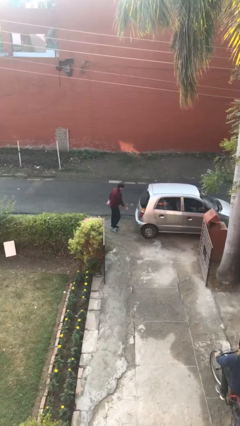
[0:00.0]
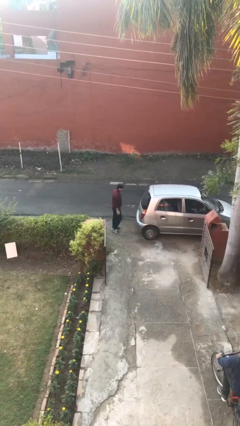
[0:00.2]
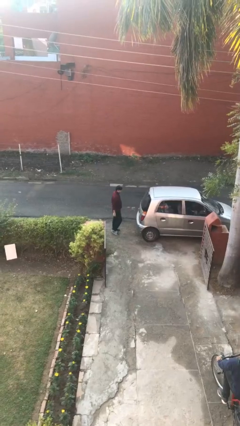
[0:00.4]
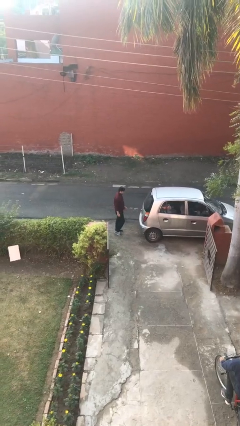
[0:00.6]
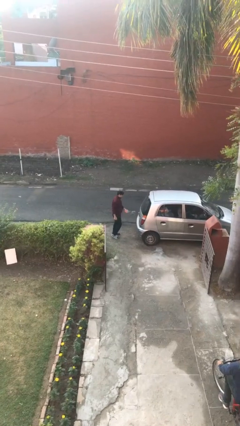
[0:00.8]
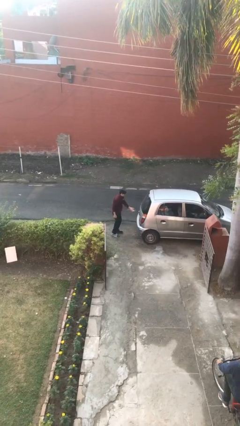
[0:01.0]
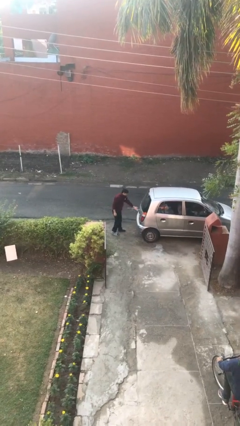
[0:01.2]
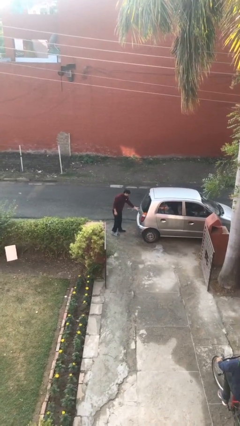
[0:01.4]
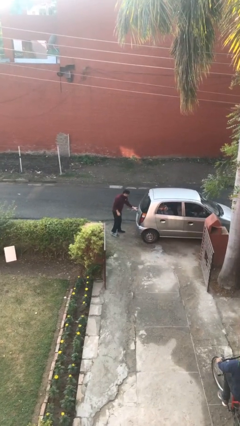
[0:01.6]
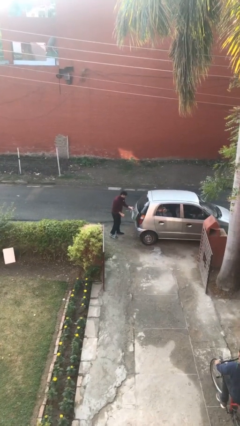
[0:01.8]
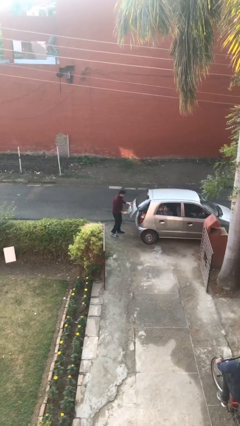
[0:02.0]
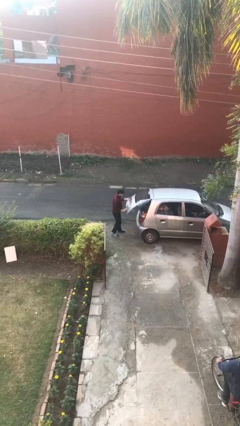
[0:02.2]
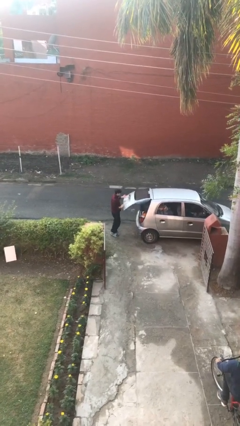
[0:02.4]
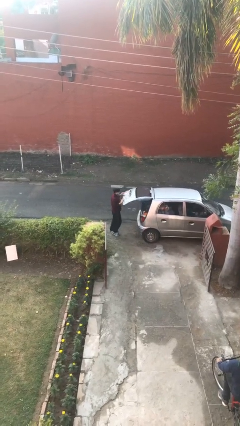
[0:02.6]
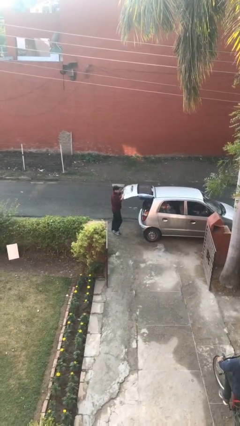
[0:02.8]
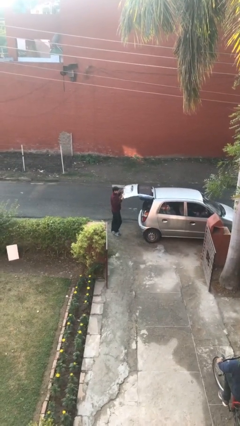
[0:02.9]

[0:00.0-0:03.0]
person opens car trunk

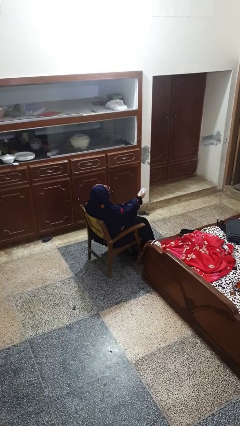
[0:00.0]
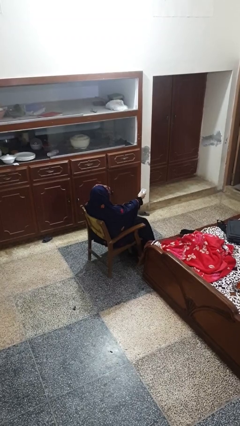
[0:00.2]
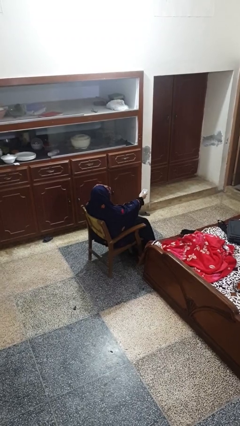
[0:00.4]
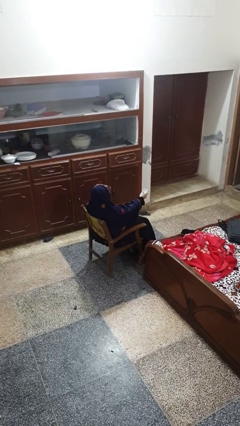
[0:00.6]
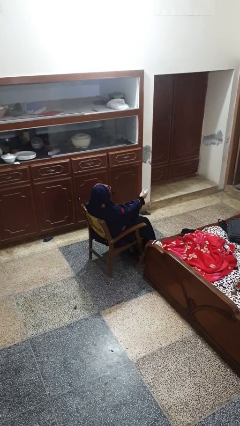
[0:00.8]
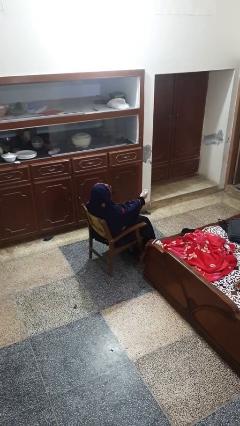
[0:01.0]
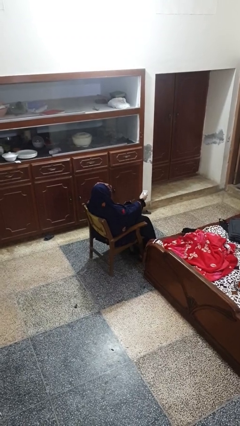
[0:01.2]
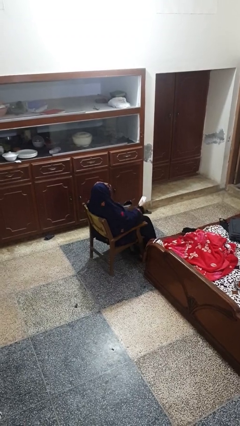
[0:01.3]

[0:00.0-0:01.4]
person uses television remote

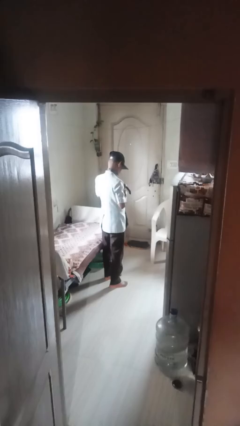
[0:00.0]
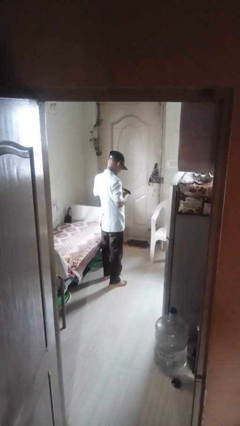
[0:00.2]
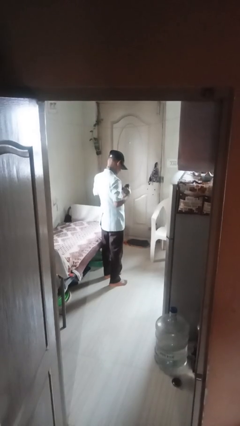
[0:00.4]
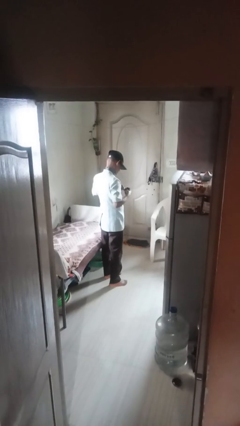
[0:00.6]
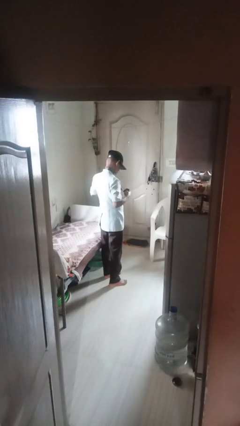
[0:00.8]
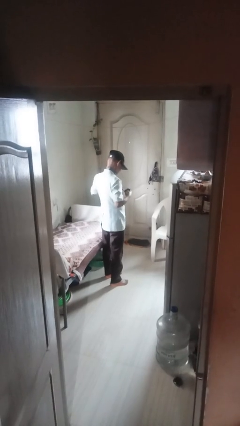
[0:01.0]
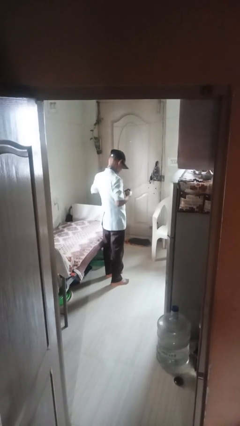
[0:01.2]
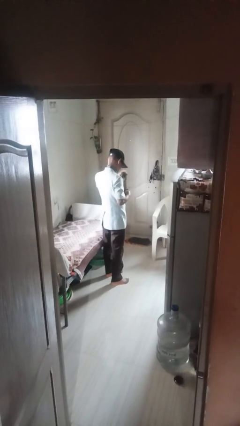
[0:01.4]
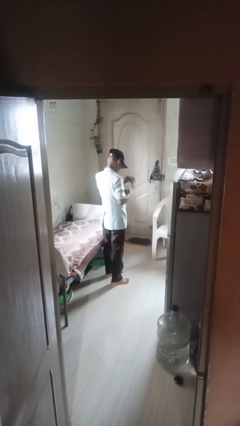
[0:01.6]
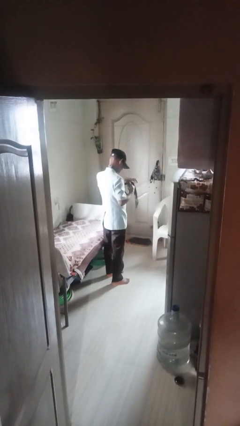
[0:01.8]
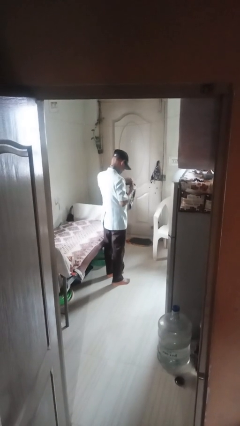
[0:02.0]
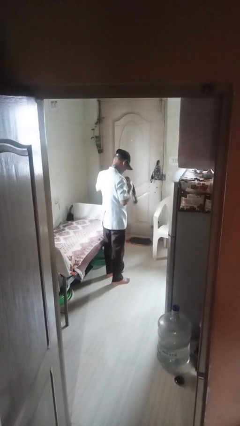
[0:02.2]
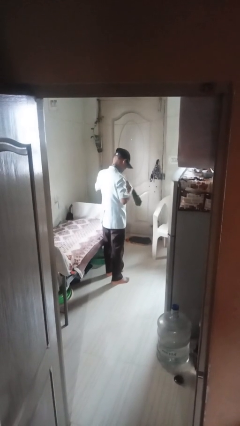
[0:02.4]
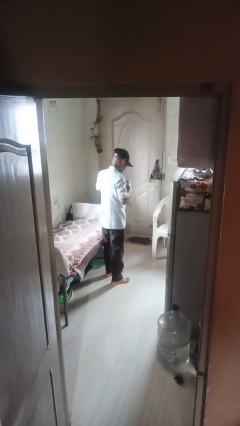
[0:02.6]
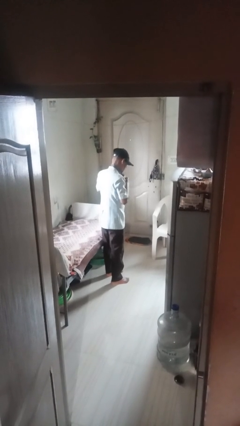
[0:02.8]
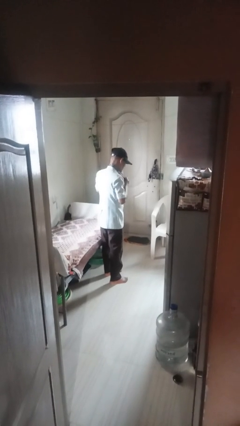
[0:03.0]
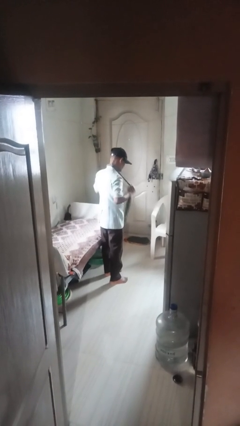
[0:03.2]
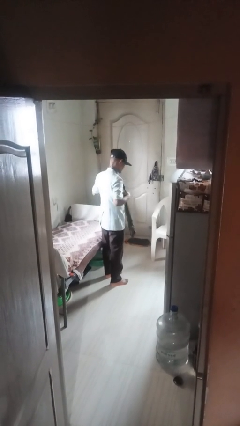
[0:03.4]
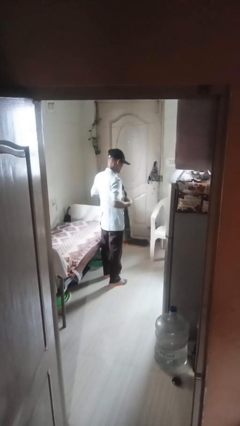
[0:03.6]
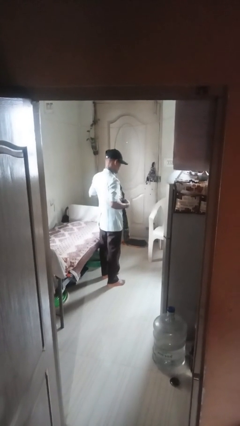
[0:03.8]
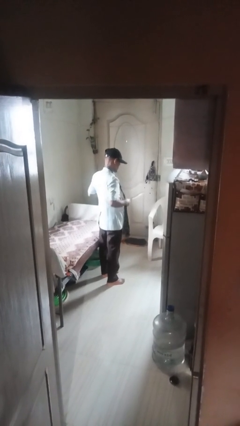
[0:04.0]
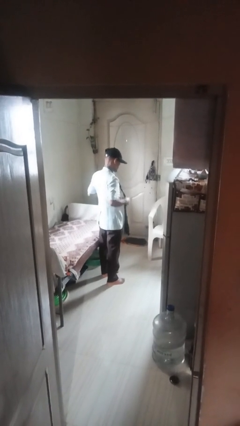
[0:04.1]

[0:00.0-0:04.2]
person takes off necktie

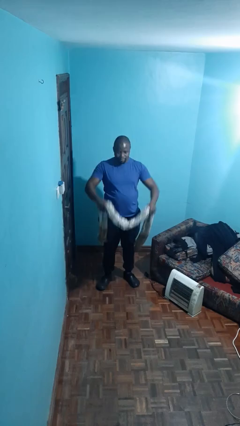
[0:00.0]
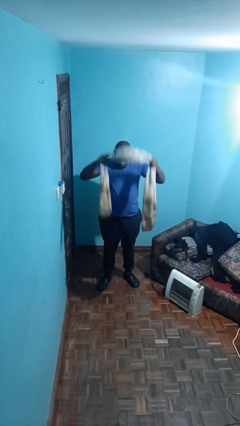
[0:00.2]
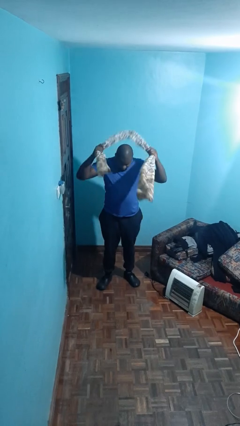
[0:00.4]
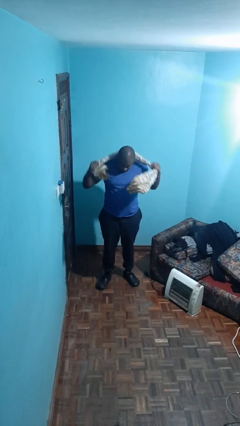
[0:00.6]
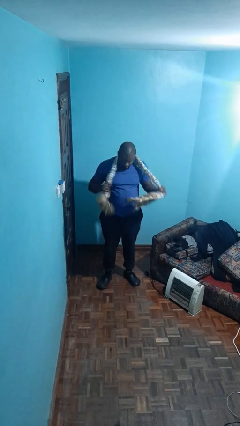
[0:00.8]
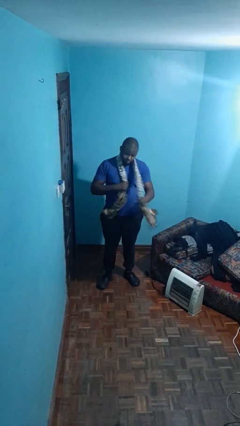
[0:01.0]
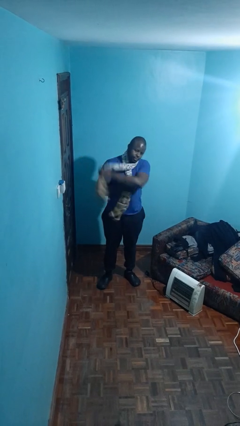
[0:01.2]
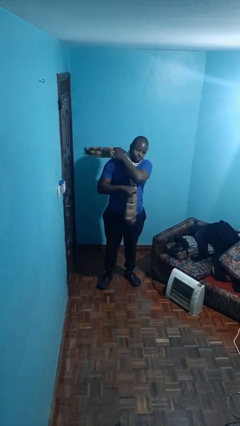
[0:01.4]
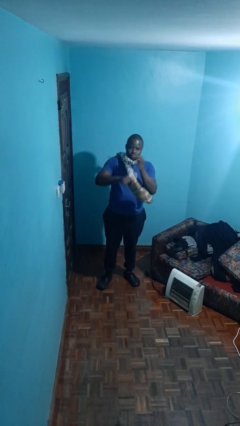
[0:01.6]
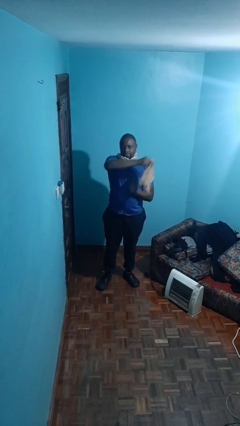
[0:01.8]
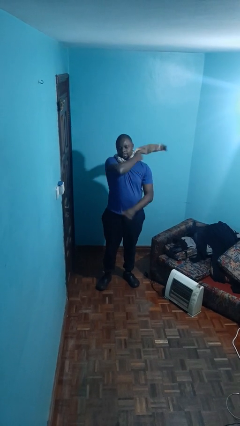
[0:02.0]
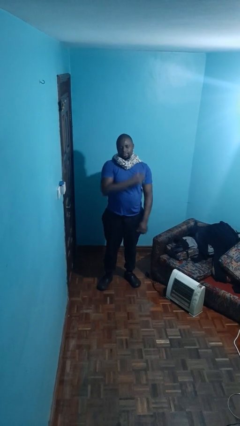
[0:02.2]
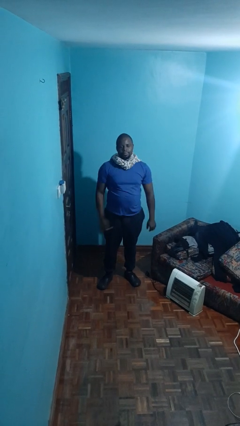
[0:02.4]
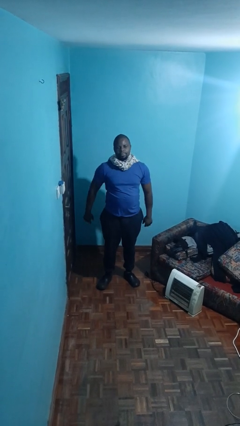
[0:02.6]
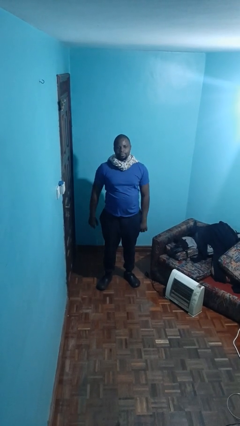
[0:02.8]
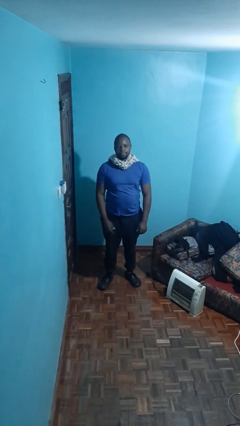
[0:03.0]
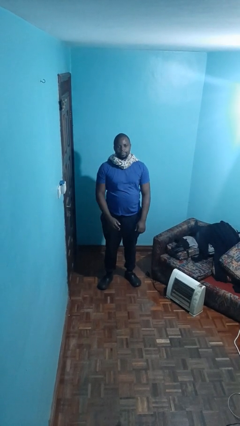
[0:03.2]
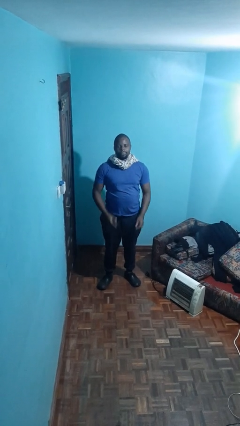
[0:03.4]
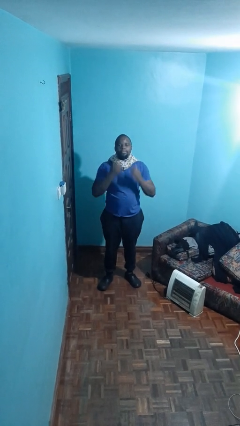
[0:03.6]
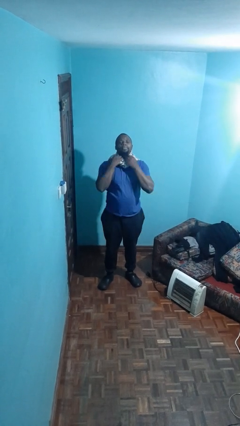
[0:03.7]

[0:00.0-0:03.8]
person puts on scarf

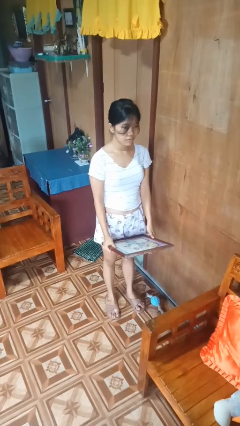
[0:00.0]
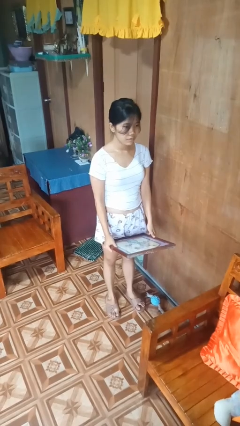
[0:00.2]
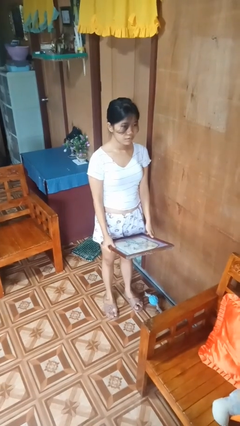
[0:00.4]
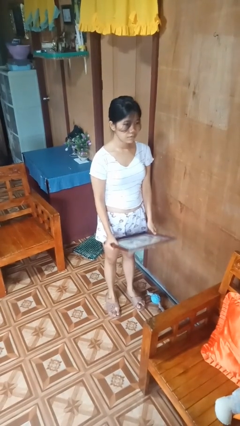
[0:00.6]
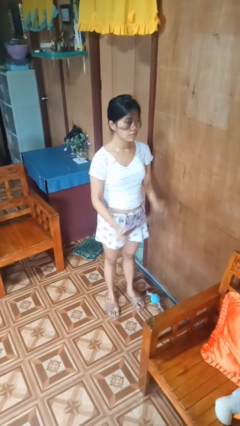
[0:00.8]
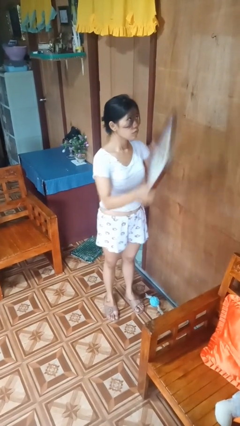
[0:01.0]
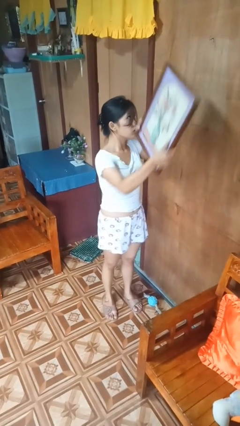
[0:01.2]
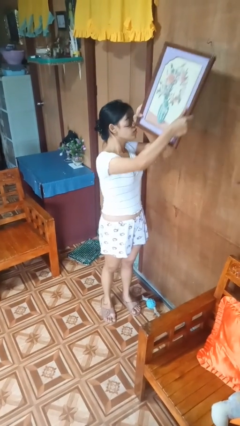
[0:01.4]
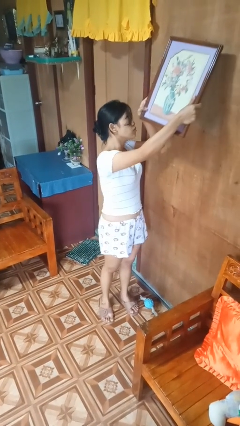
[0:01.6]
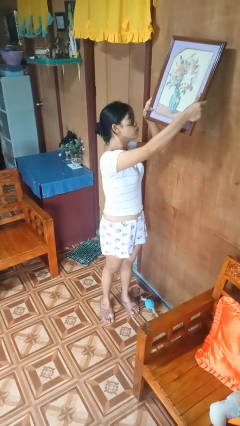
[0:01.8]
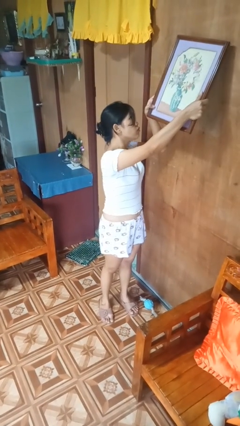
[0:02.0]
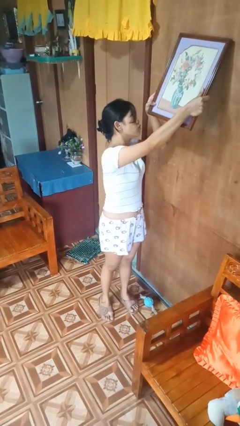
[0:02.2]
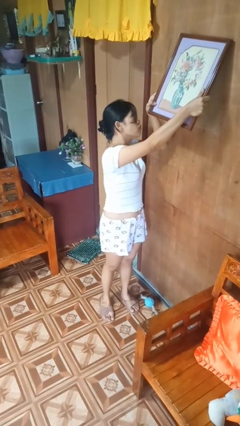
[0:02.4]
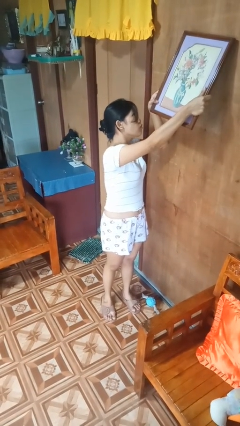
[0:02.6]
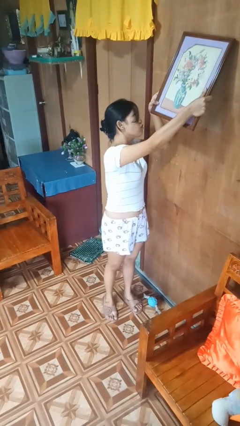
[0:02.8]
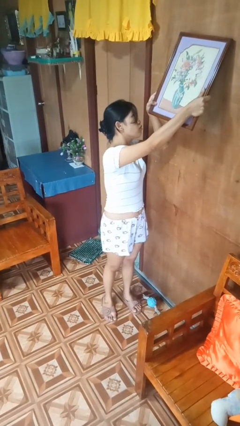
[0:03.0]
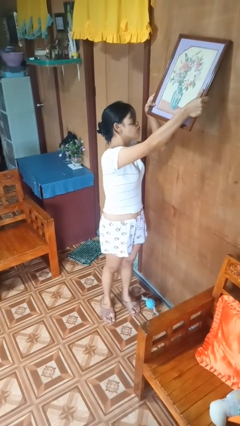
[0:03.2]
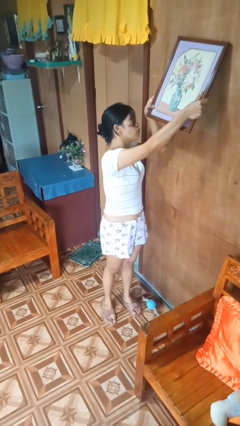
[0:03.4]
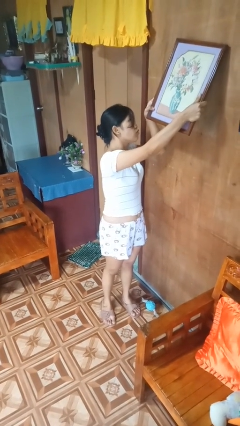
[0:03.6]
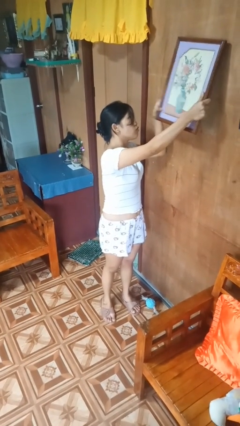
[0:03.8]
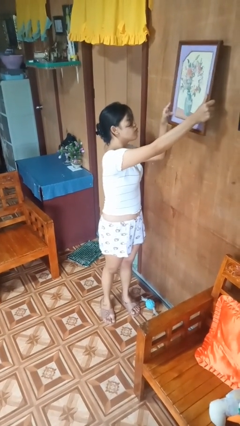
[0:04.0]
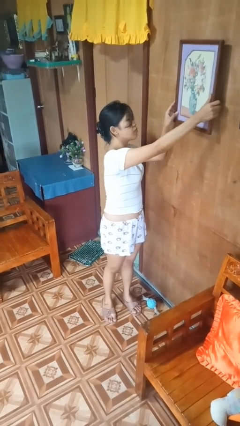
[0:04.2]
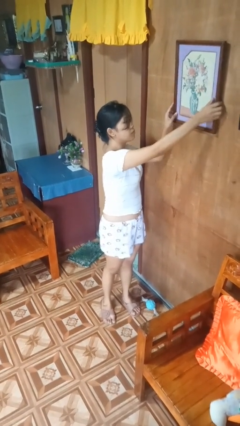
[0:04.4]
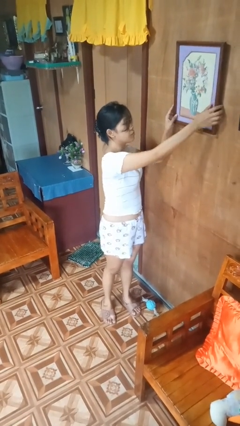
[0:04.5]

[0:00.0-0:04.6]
person puts up picture frame

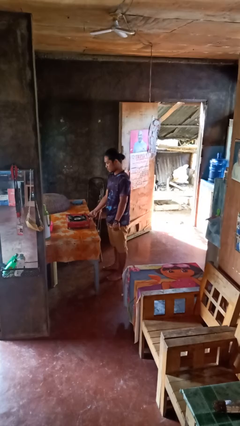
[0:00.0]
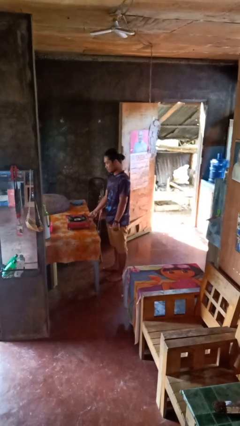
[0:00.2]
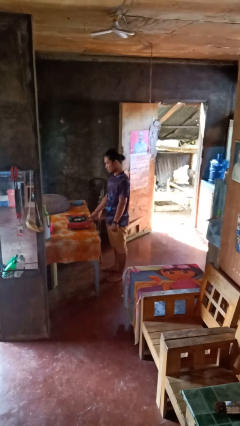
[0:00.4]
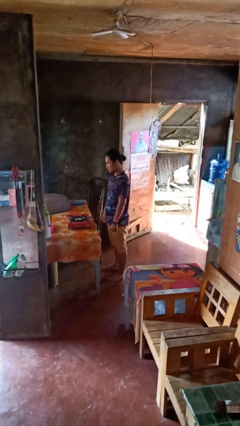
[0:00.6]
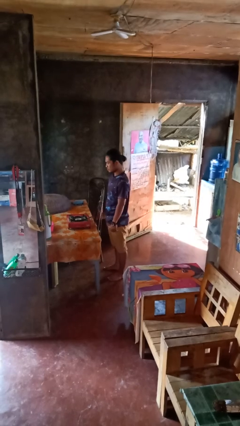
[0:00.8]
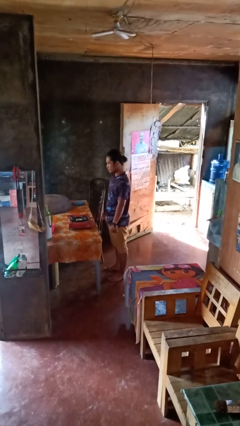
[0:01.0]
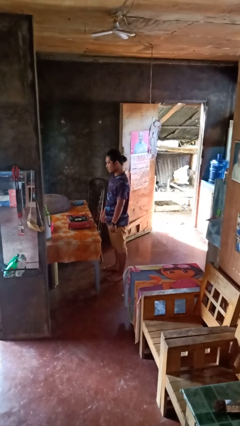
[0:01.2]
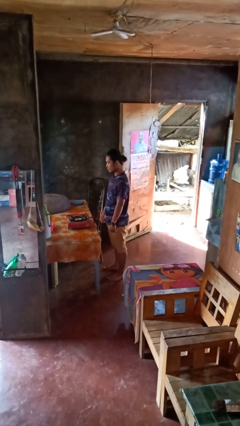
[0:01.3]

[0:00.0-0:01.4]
person turns off stovetop
